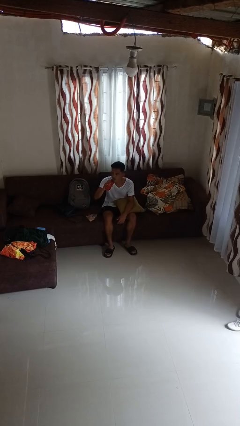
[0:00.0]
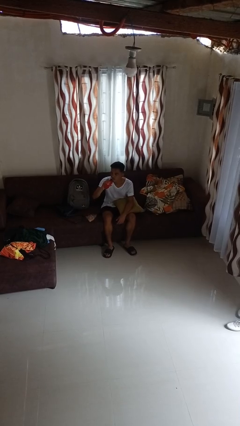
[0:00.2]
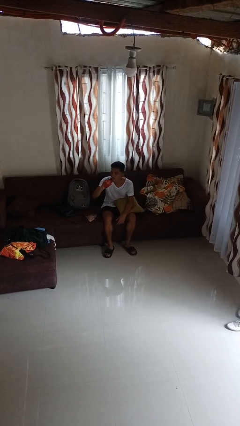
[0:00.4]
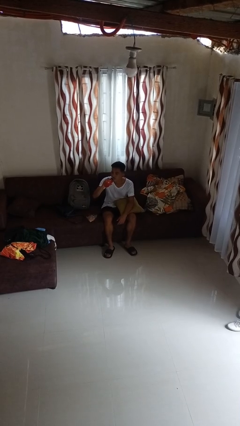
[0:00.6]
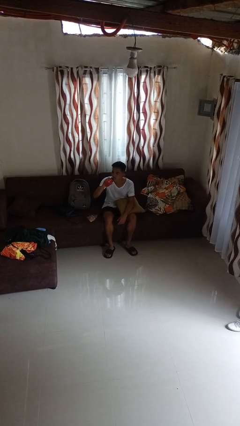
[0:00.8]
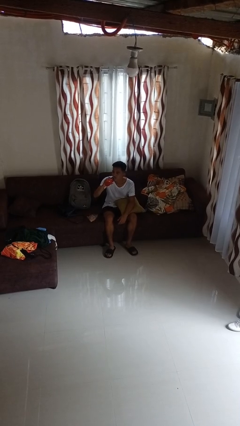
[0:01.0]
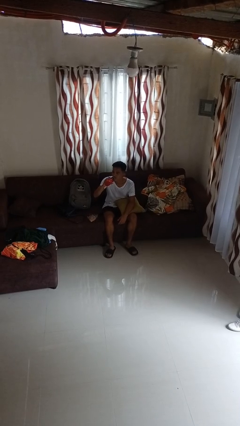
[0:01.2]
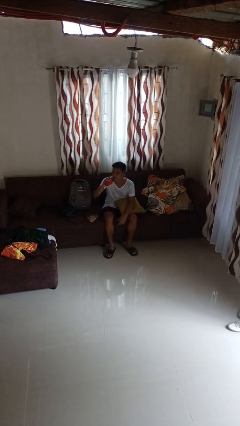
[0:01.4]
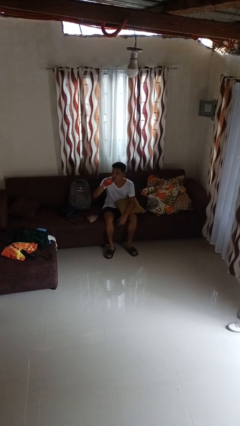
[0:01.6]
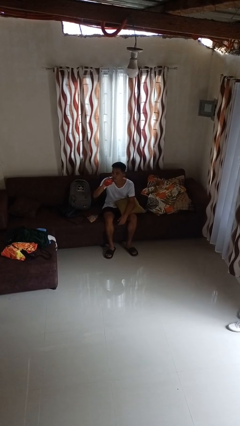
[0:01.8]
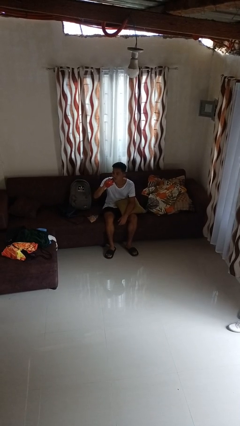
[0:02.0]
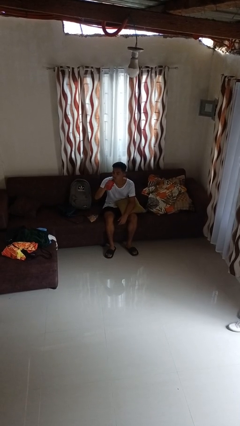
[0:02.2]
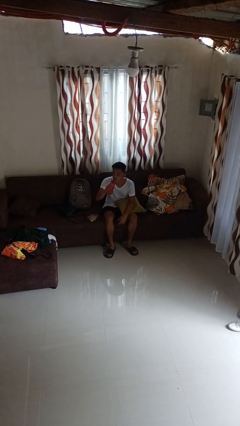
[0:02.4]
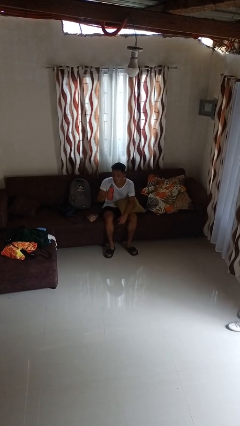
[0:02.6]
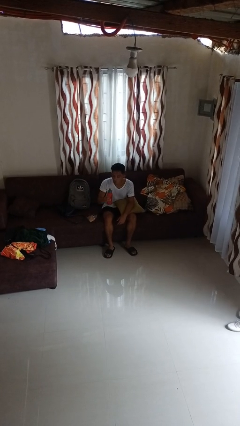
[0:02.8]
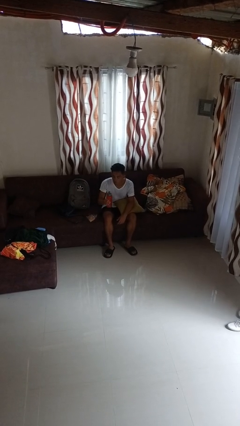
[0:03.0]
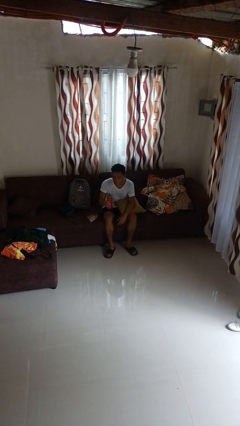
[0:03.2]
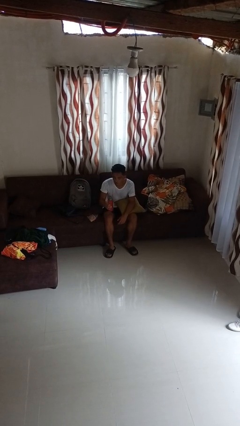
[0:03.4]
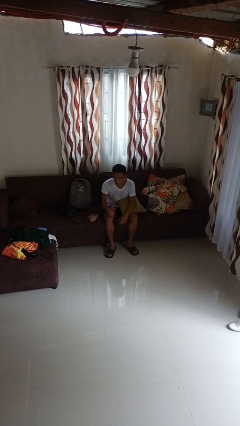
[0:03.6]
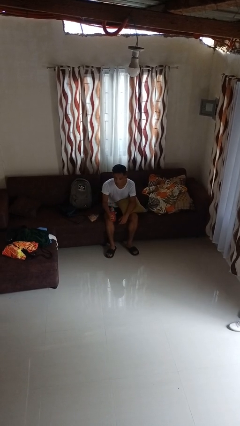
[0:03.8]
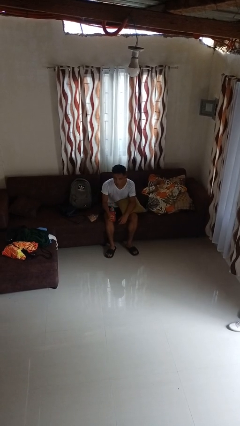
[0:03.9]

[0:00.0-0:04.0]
person drinks from bottle

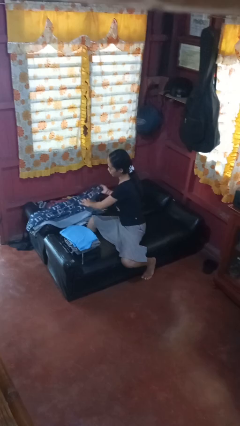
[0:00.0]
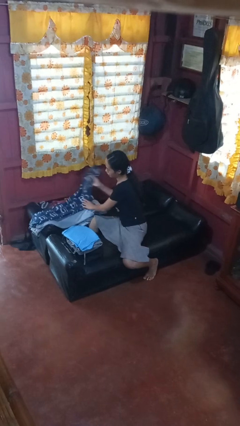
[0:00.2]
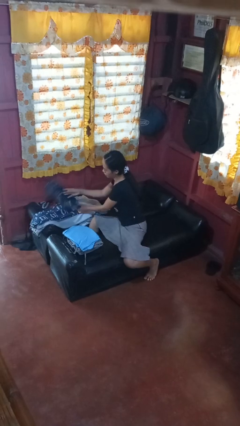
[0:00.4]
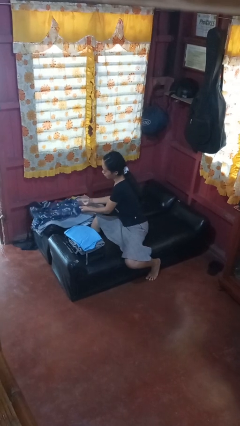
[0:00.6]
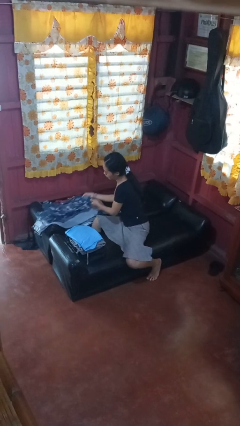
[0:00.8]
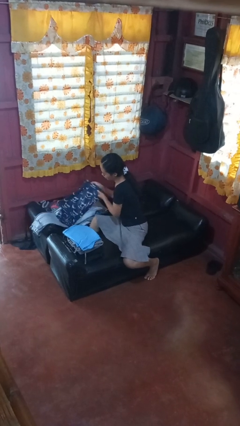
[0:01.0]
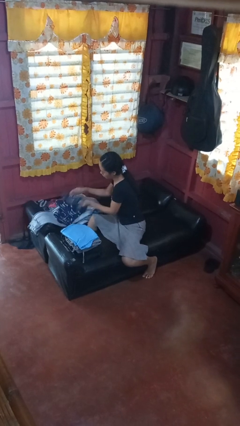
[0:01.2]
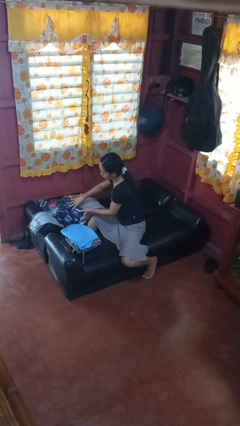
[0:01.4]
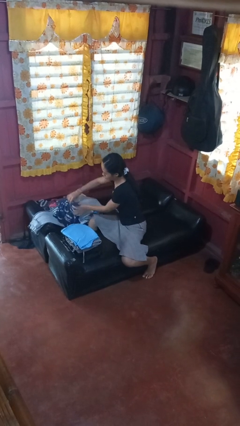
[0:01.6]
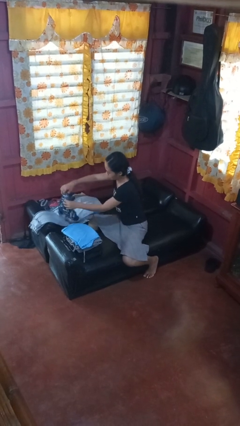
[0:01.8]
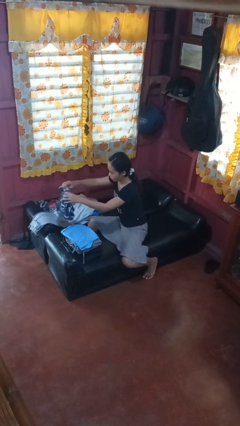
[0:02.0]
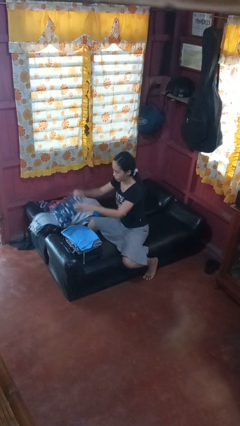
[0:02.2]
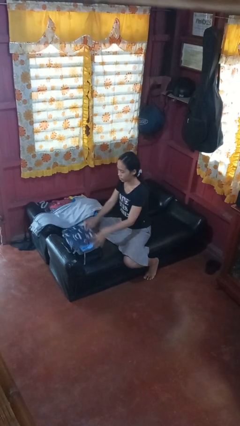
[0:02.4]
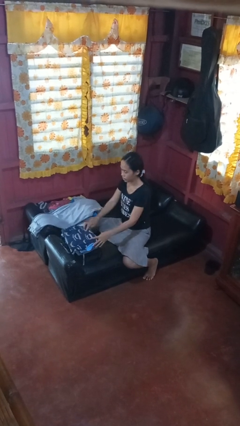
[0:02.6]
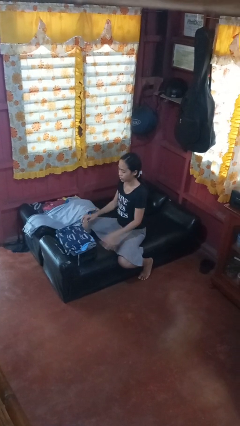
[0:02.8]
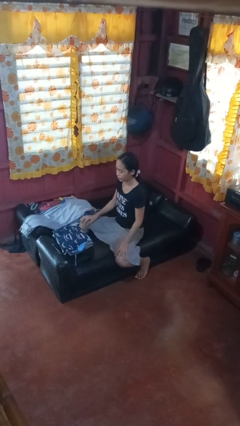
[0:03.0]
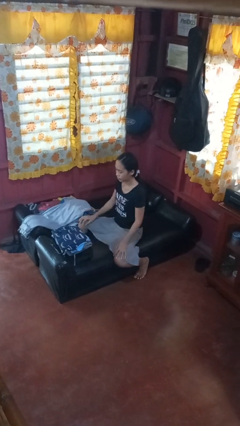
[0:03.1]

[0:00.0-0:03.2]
person folds pants

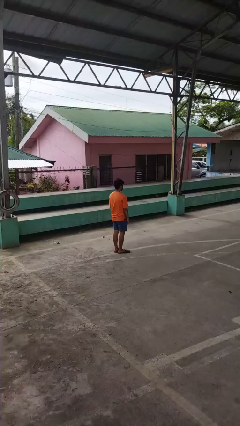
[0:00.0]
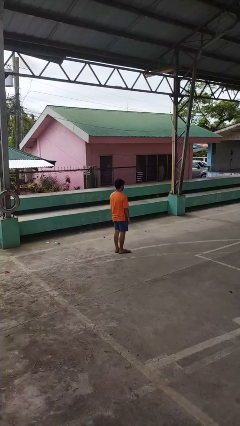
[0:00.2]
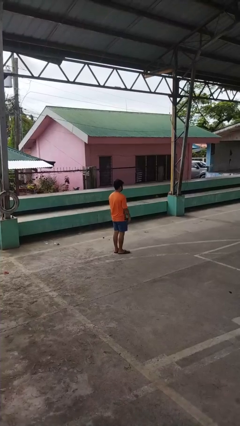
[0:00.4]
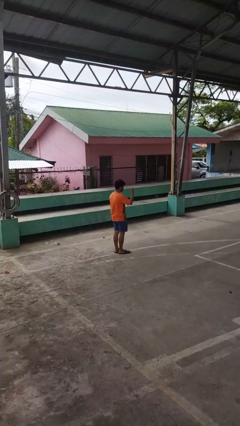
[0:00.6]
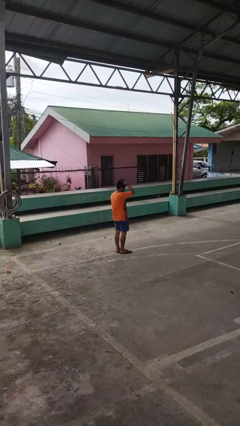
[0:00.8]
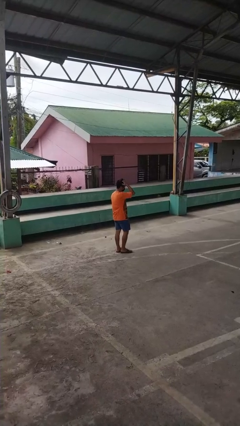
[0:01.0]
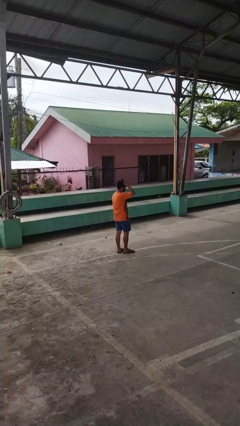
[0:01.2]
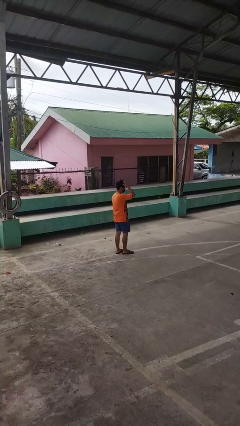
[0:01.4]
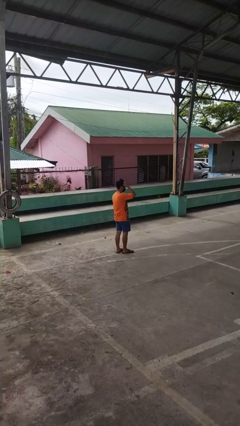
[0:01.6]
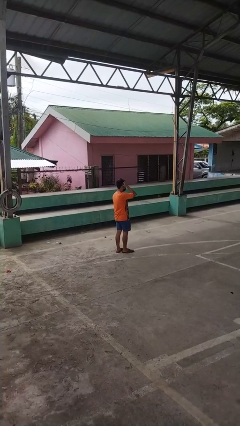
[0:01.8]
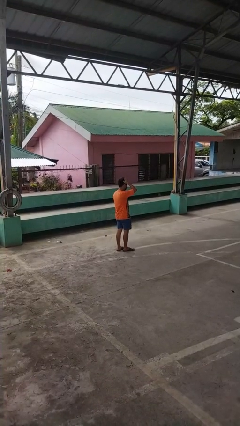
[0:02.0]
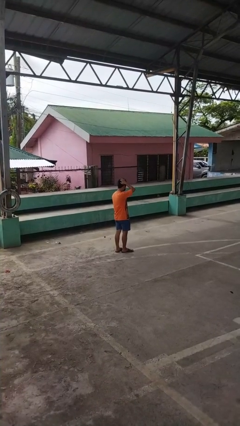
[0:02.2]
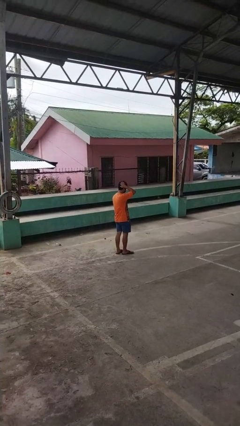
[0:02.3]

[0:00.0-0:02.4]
person scratches face

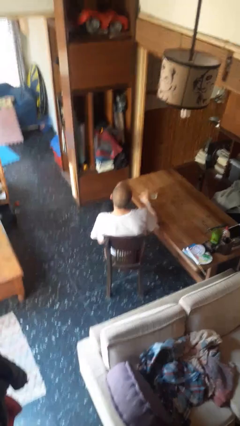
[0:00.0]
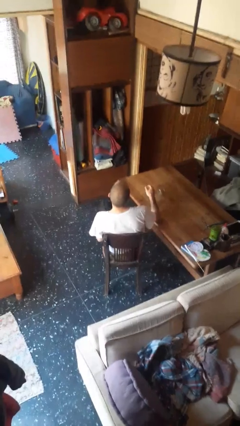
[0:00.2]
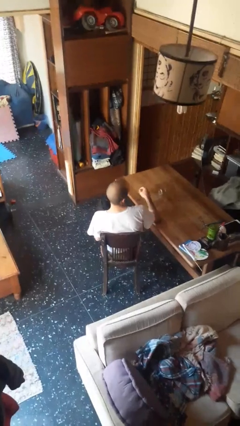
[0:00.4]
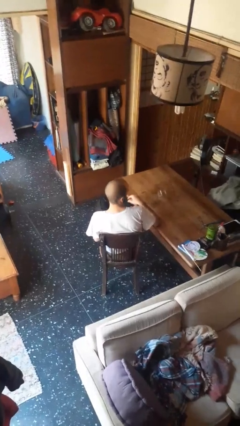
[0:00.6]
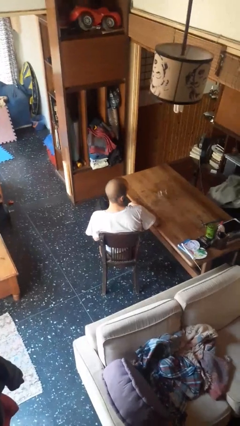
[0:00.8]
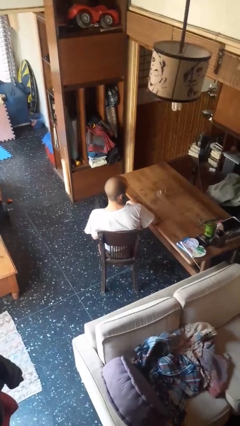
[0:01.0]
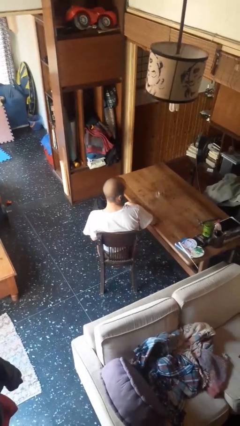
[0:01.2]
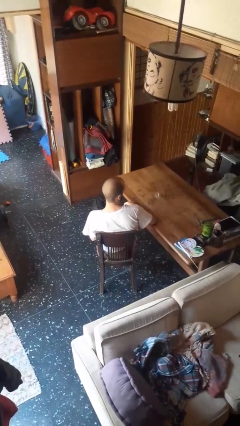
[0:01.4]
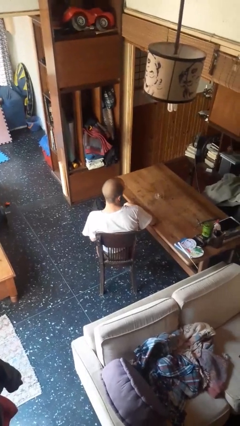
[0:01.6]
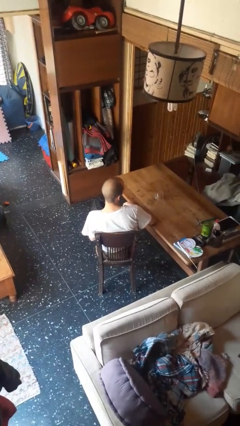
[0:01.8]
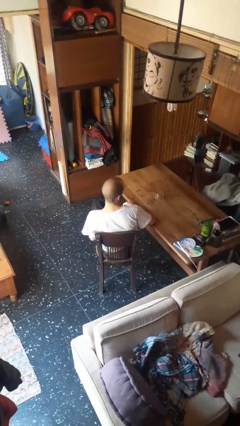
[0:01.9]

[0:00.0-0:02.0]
person knocks over glass

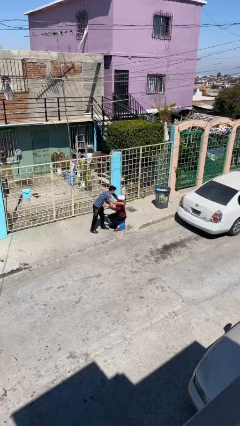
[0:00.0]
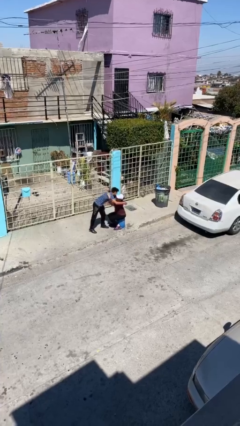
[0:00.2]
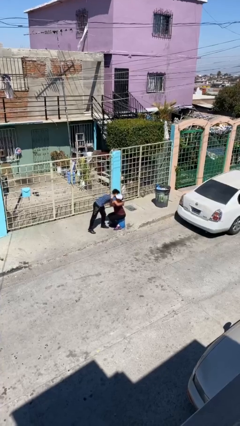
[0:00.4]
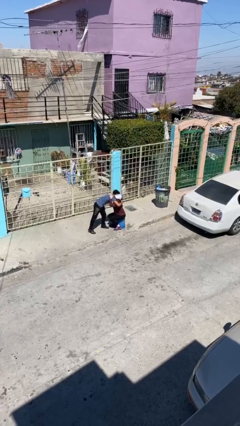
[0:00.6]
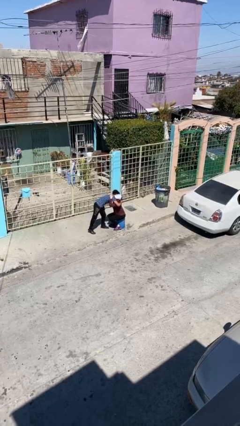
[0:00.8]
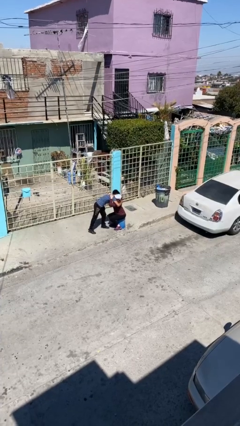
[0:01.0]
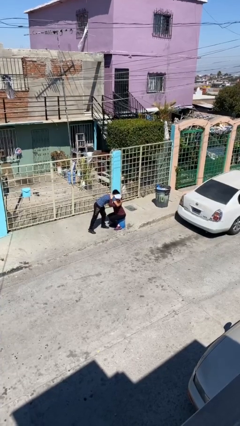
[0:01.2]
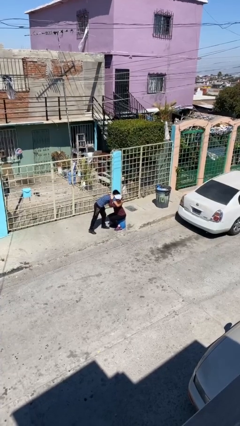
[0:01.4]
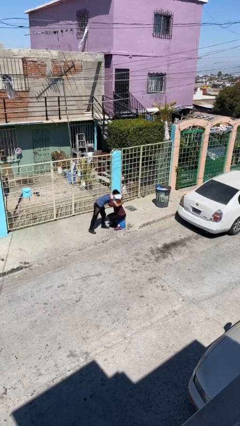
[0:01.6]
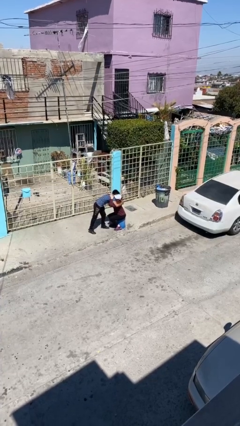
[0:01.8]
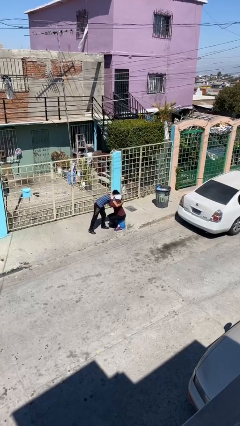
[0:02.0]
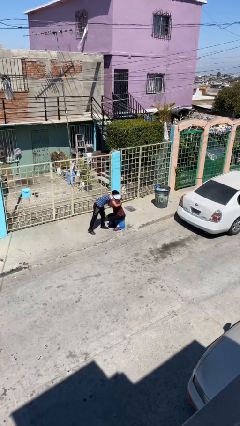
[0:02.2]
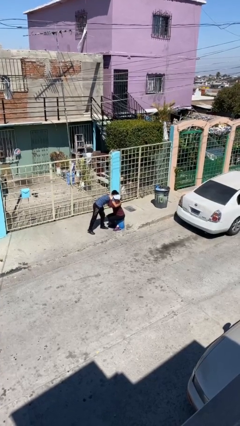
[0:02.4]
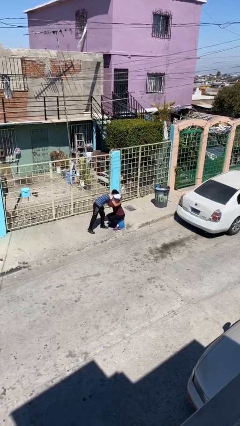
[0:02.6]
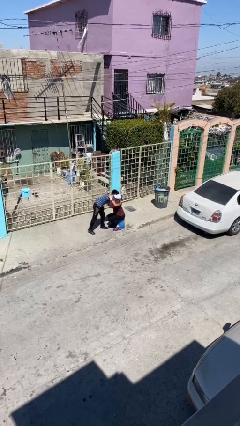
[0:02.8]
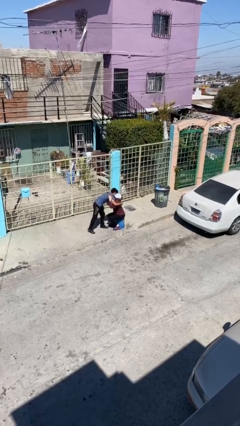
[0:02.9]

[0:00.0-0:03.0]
person embraces person

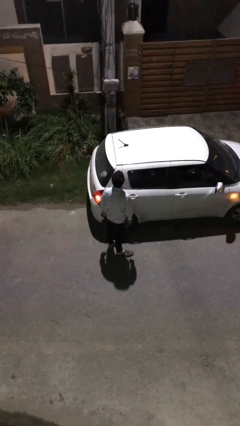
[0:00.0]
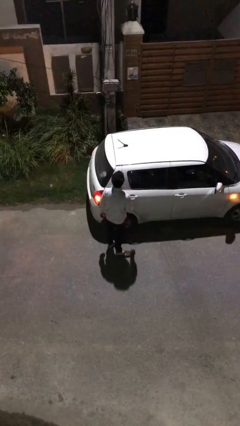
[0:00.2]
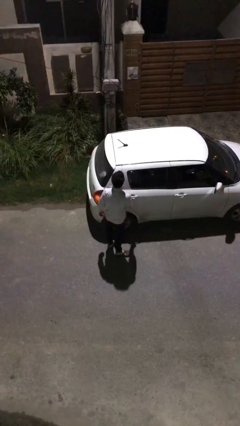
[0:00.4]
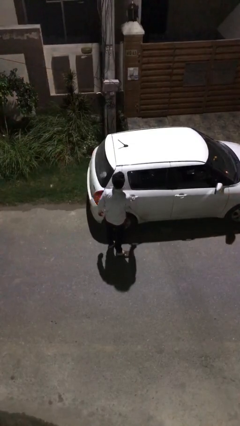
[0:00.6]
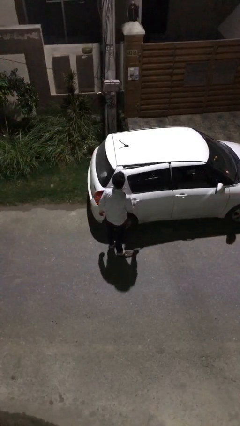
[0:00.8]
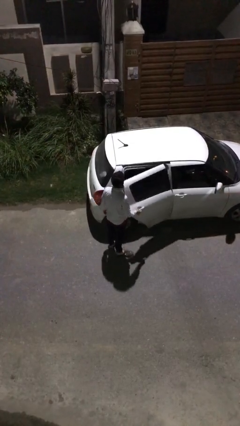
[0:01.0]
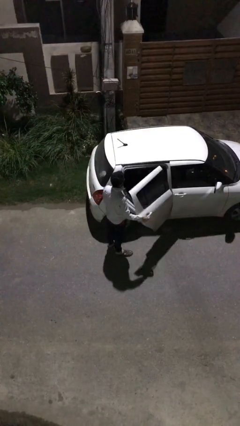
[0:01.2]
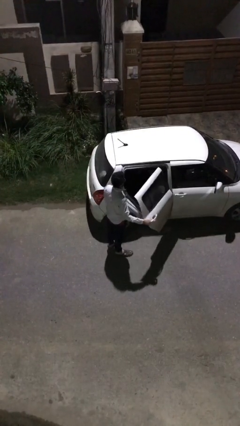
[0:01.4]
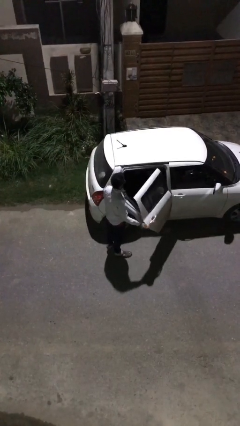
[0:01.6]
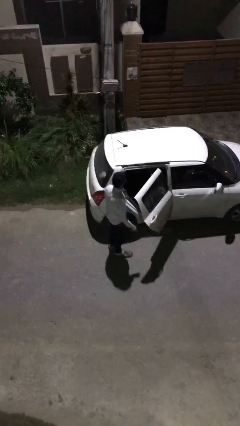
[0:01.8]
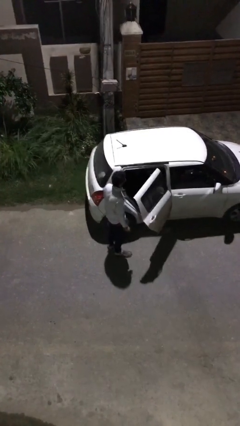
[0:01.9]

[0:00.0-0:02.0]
person opens car door

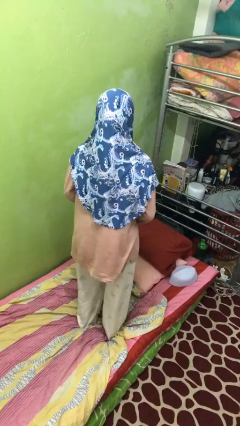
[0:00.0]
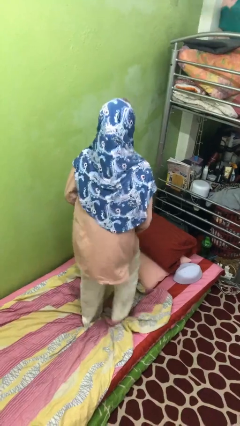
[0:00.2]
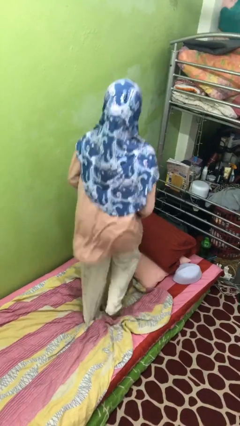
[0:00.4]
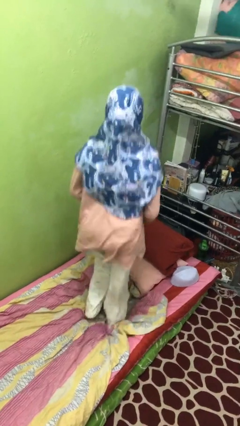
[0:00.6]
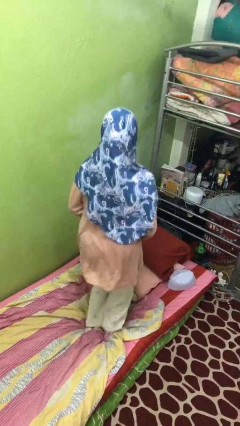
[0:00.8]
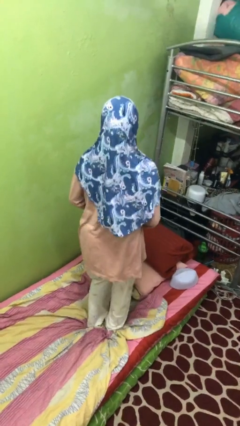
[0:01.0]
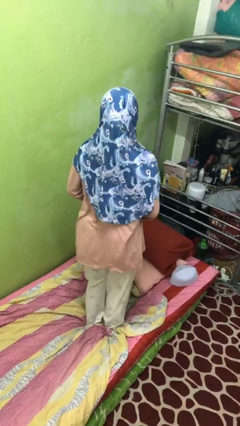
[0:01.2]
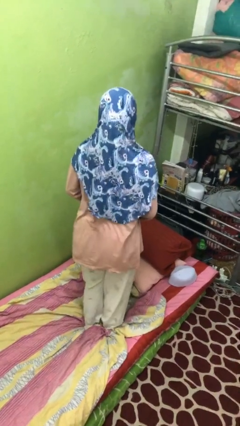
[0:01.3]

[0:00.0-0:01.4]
person jumps on bed
